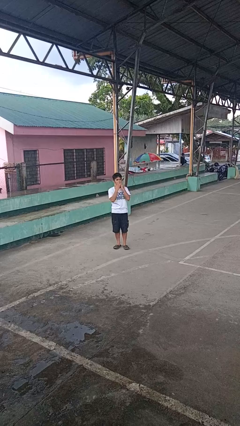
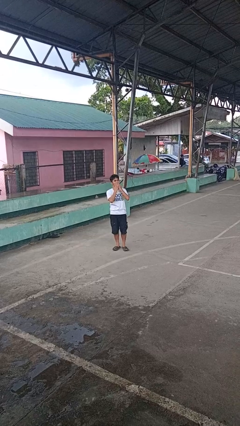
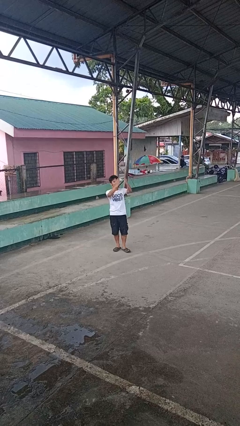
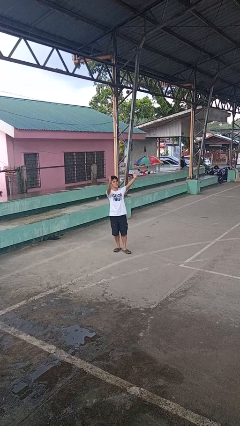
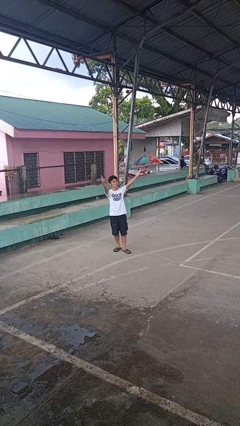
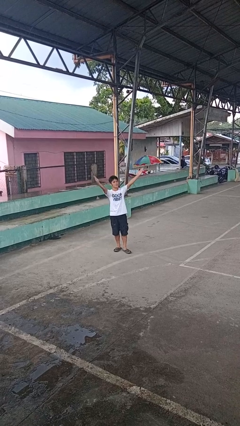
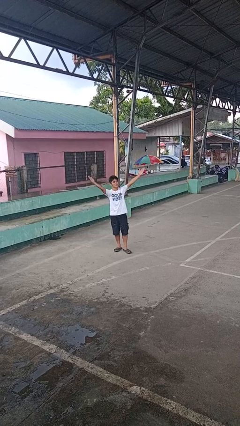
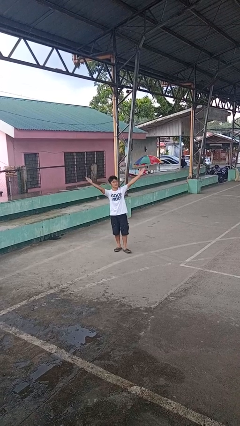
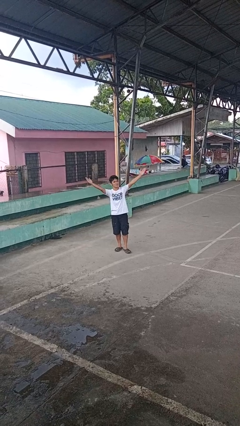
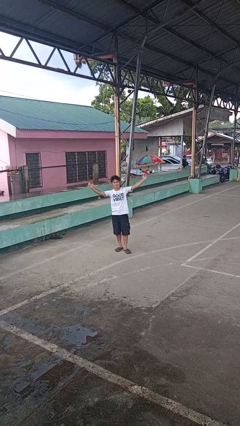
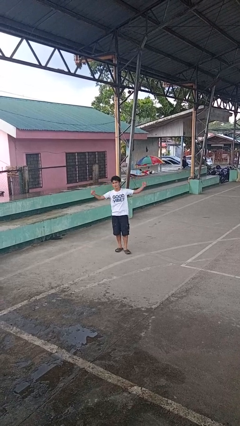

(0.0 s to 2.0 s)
person gestures blow kiss

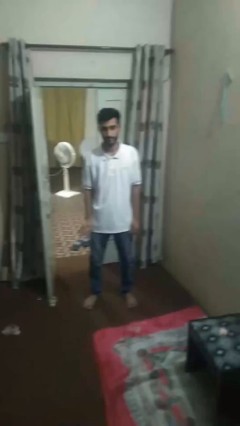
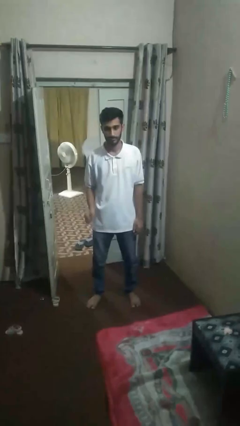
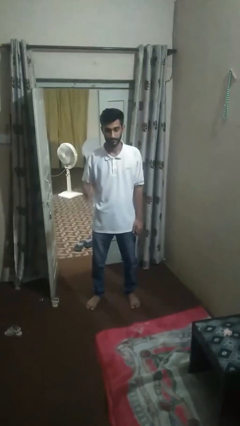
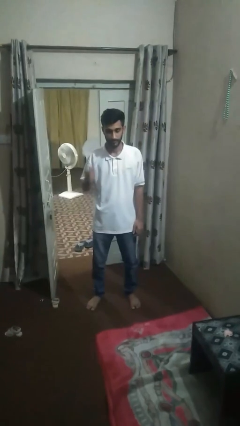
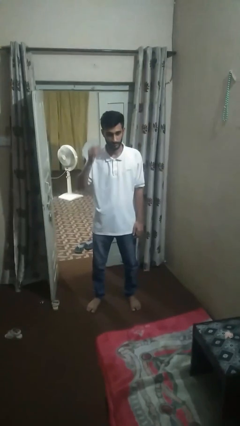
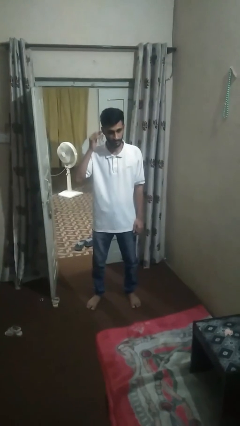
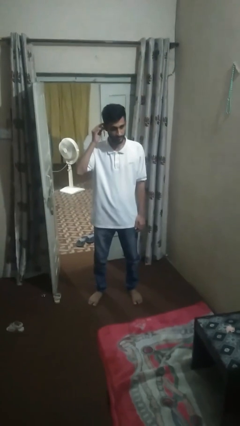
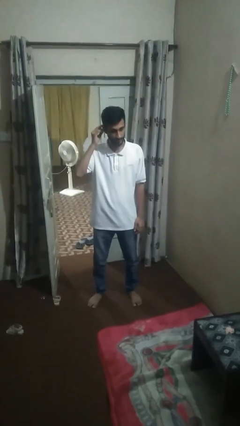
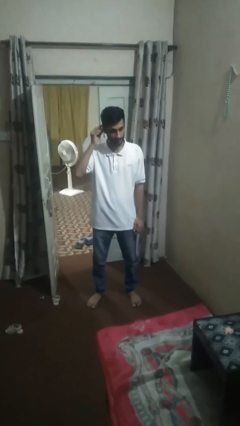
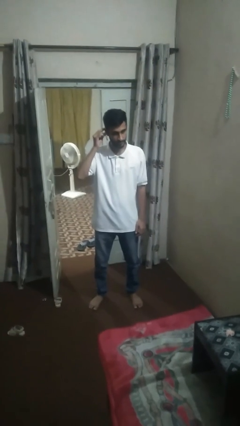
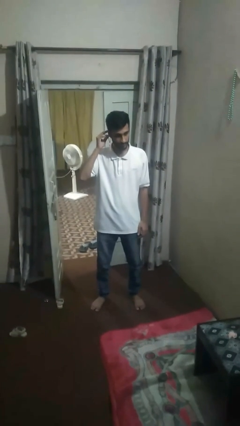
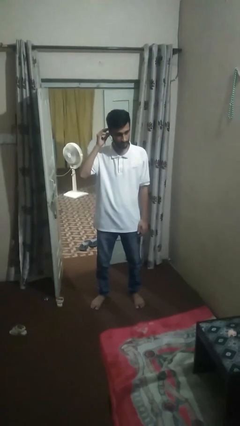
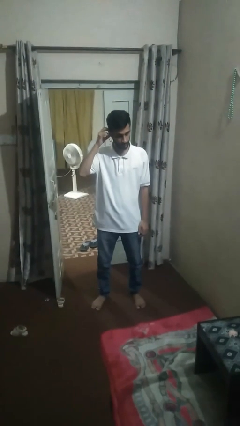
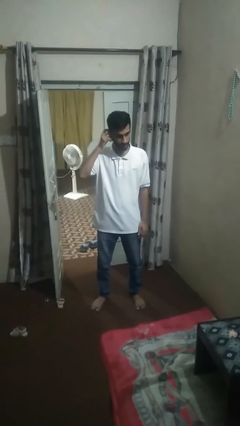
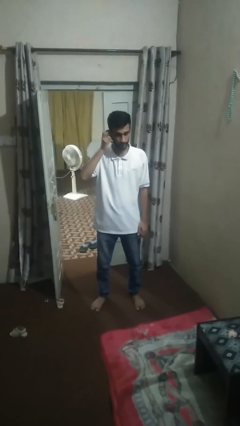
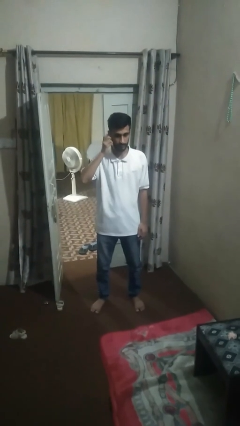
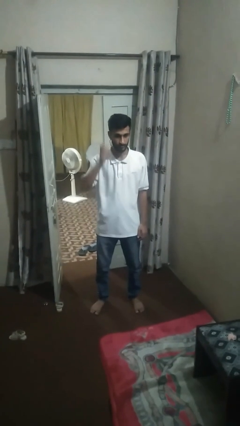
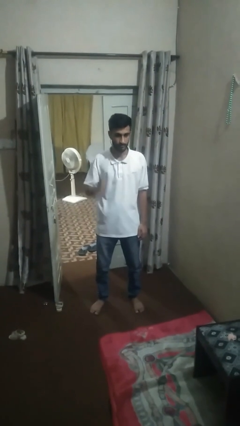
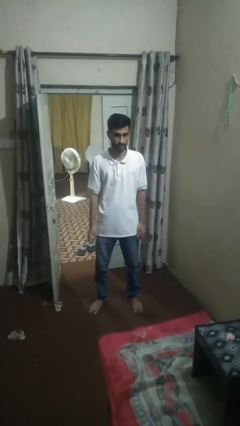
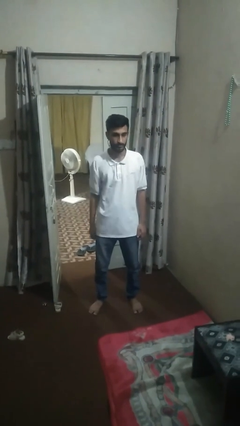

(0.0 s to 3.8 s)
person puts on earrings

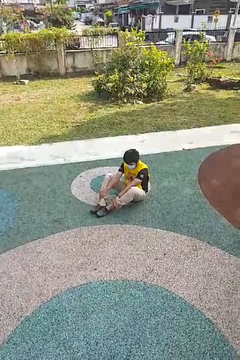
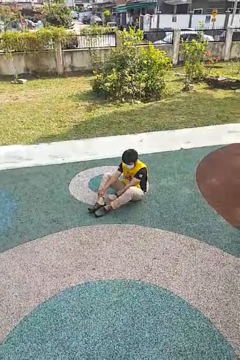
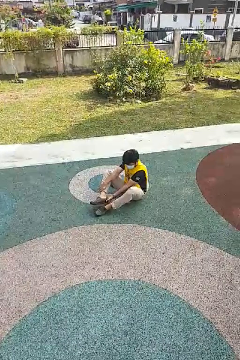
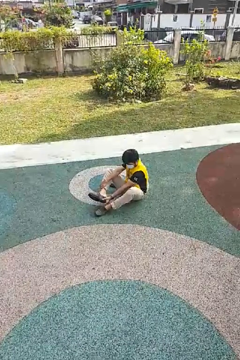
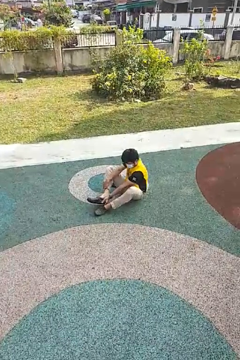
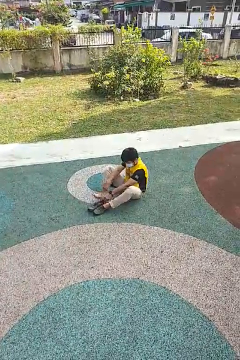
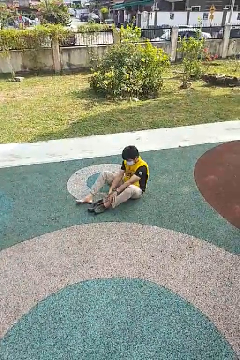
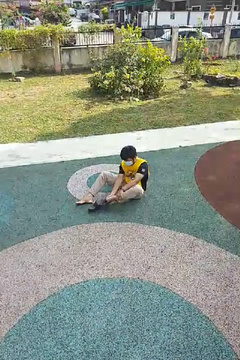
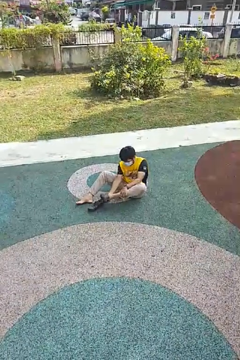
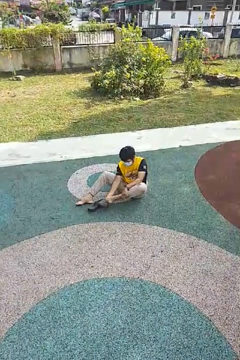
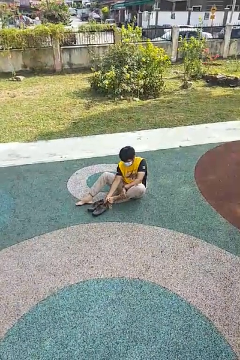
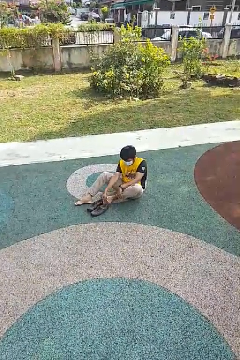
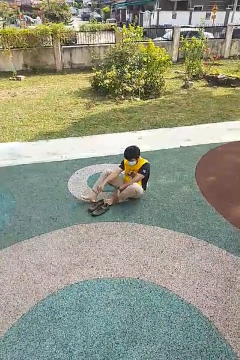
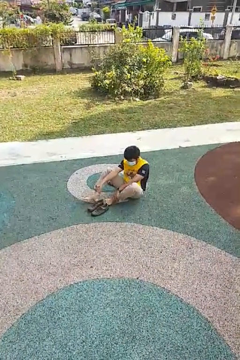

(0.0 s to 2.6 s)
person takes off shoes

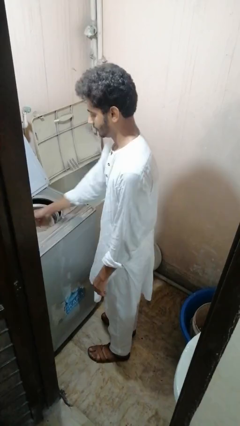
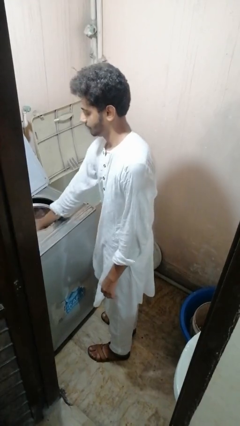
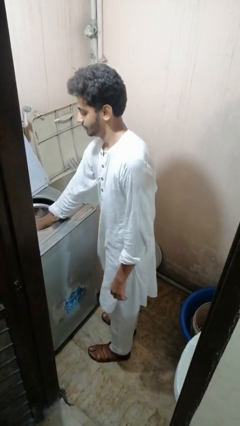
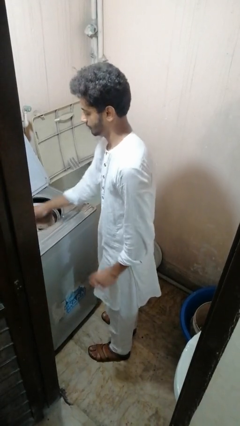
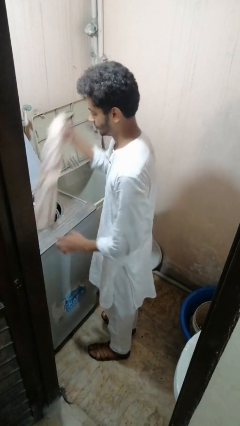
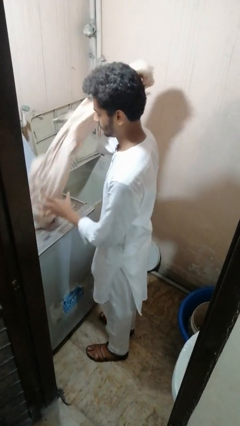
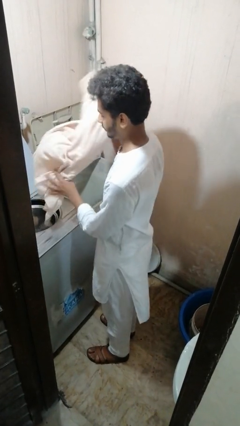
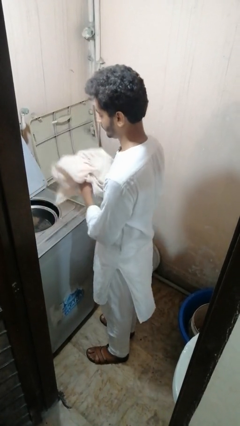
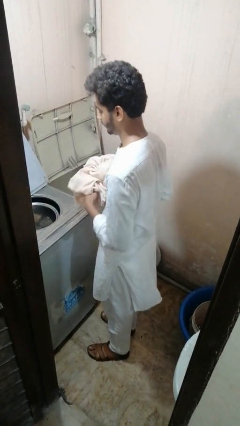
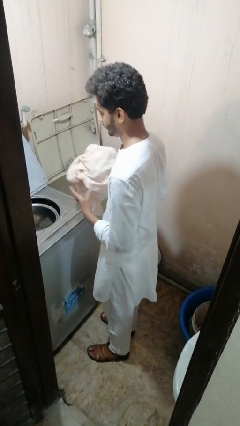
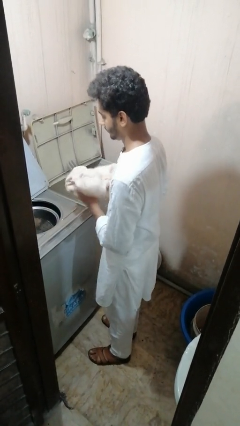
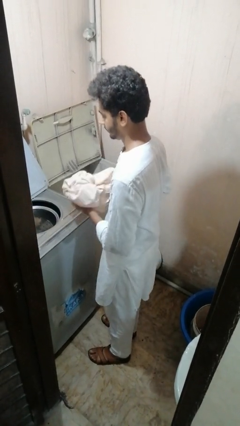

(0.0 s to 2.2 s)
person unloads dryer

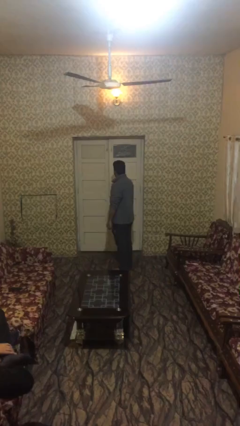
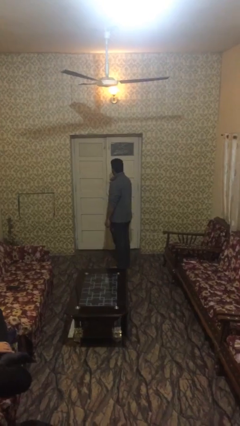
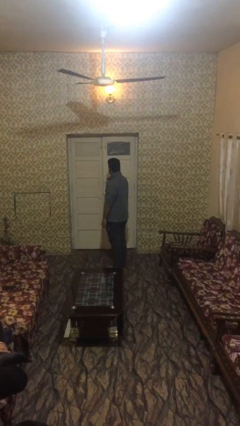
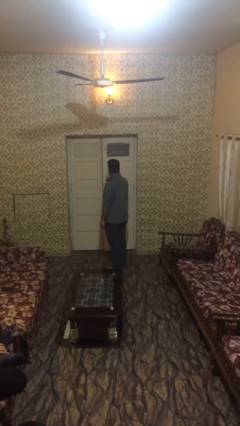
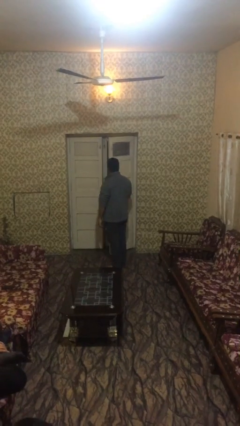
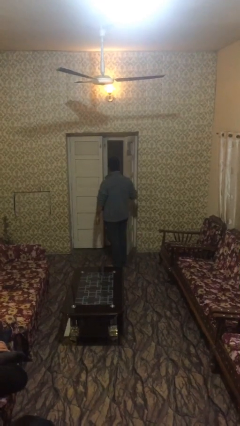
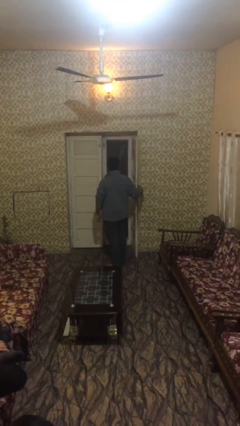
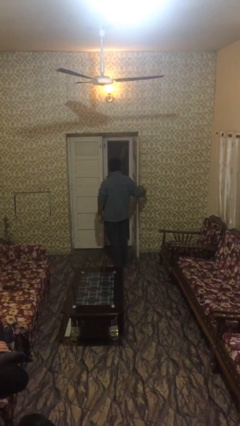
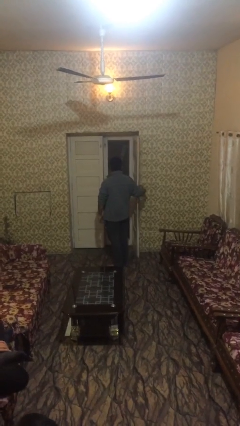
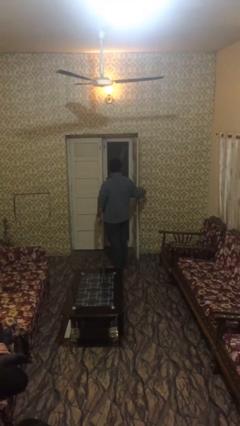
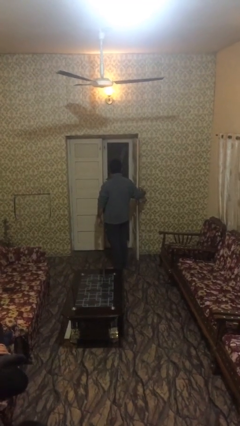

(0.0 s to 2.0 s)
person opens facility door

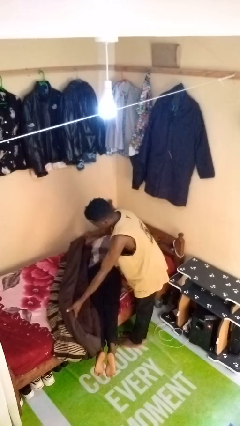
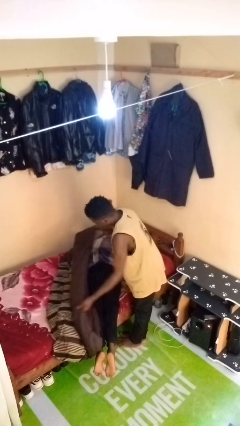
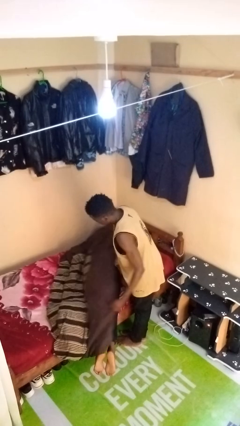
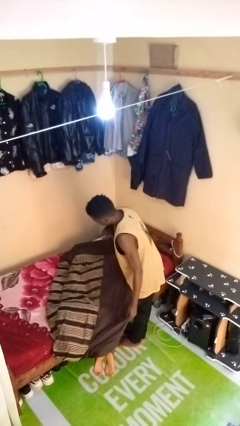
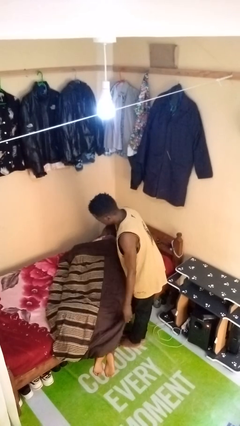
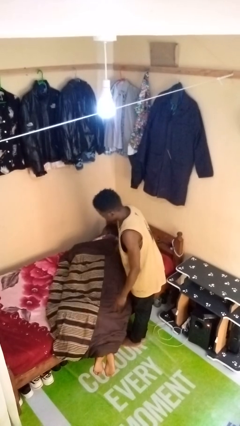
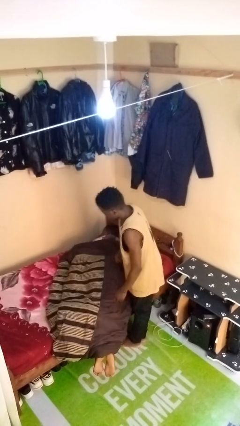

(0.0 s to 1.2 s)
person covers friend with blanket

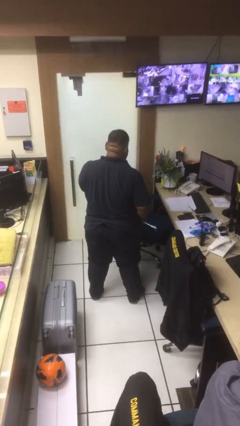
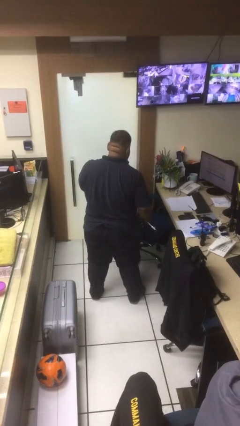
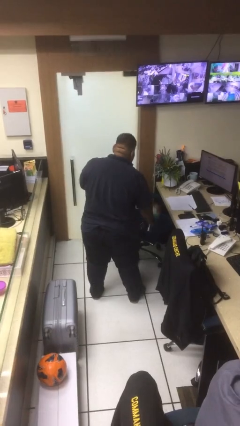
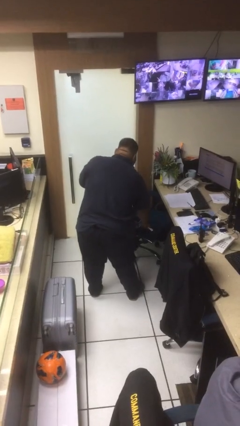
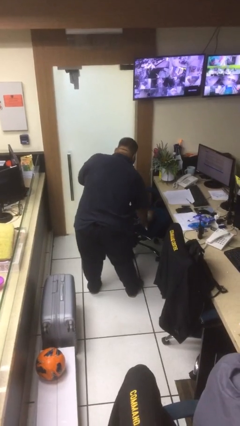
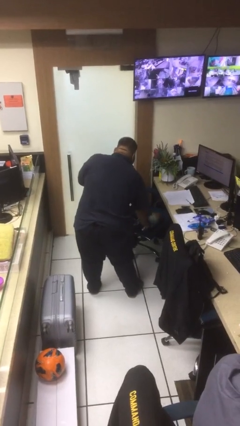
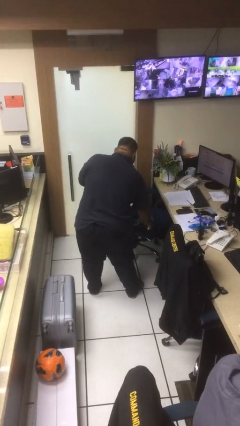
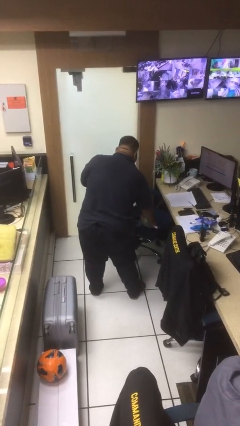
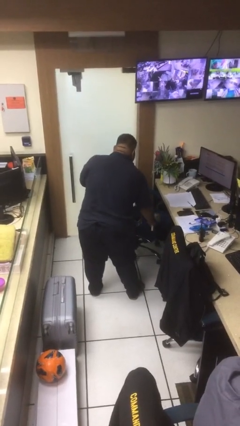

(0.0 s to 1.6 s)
person dusts furniture

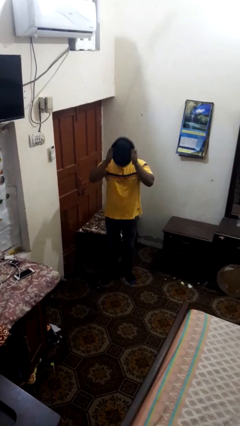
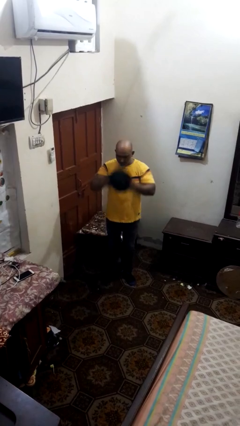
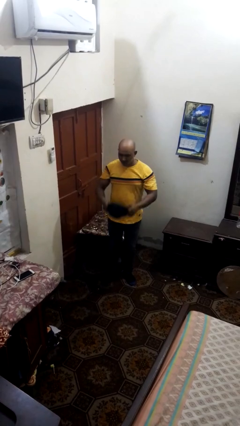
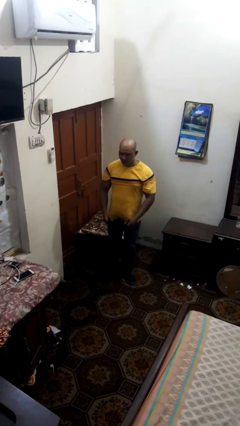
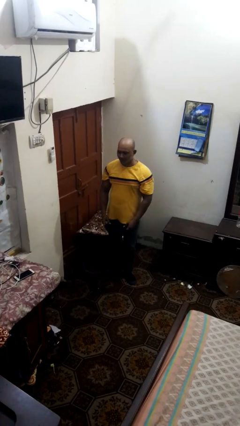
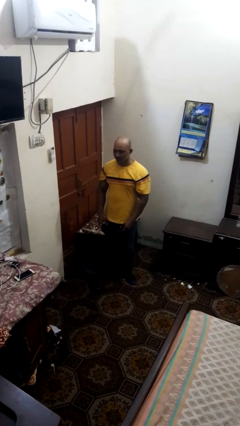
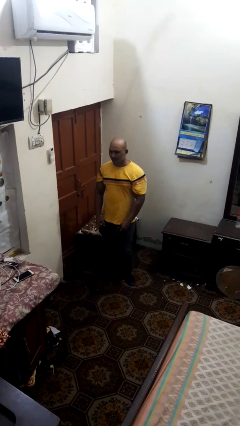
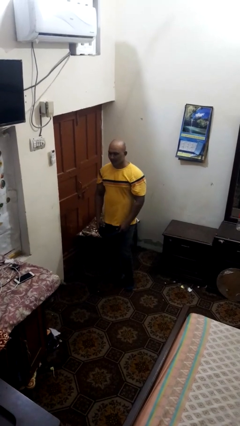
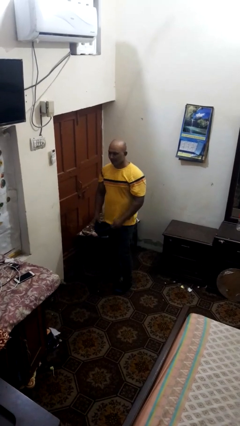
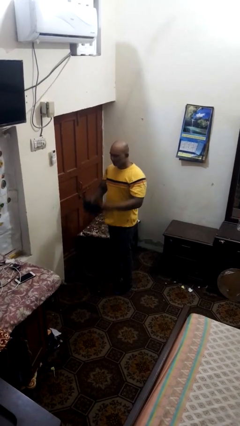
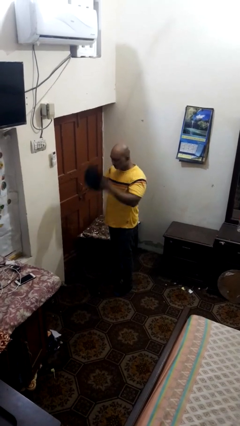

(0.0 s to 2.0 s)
person takes off hat
